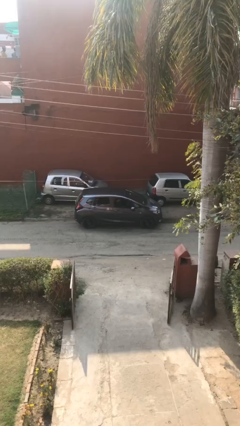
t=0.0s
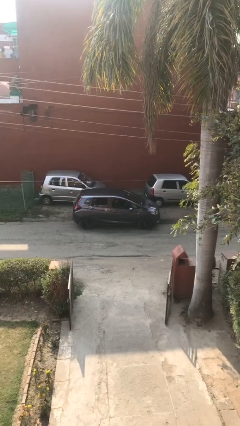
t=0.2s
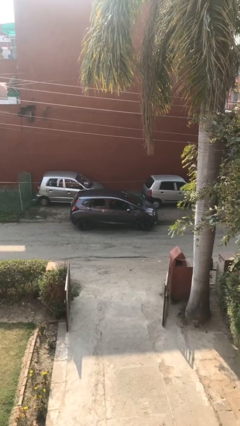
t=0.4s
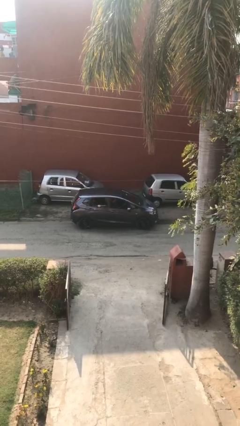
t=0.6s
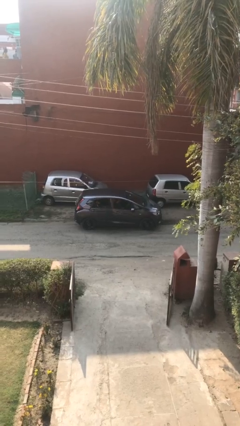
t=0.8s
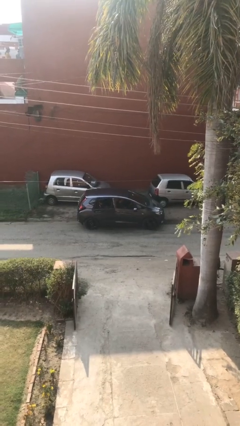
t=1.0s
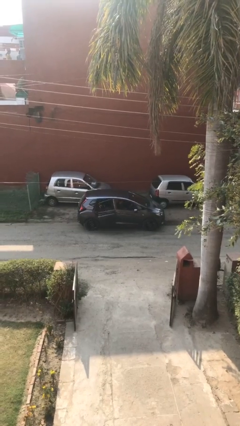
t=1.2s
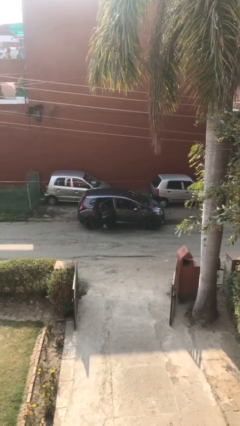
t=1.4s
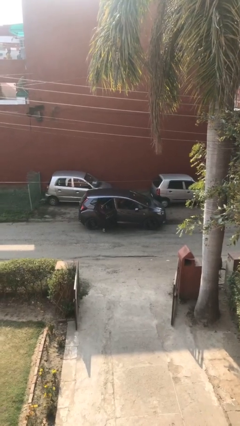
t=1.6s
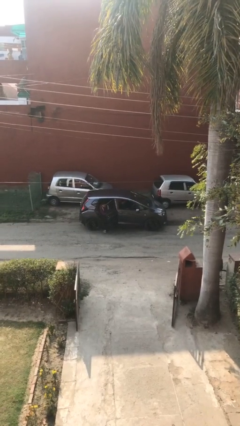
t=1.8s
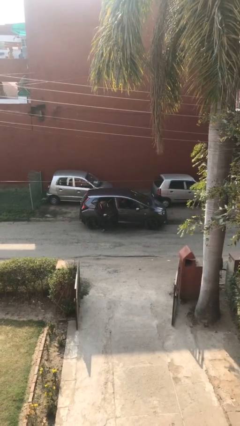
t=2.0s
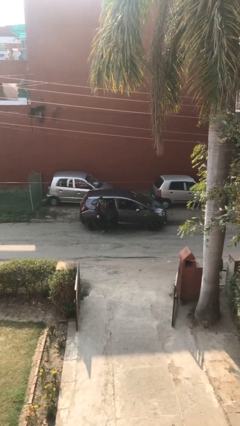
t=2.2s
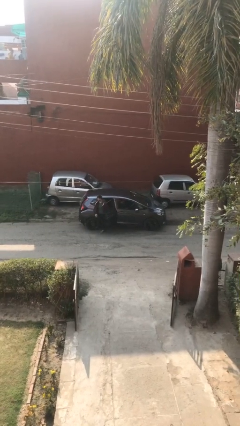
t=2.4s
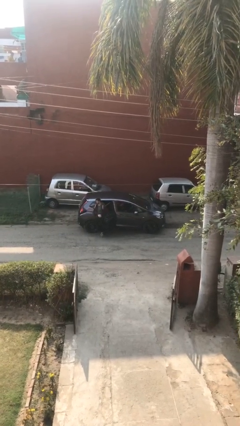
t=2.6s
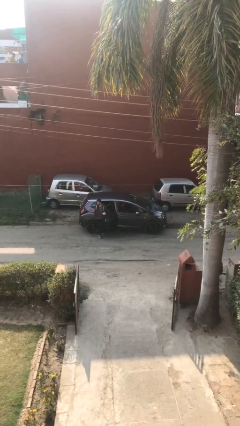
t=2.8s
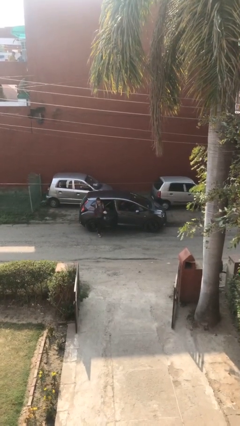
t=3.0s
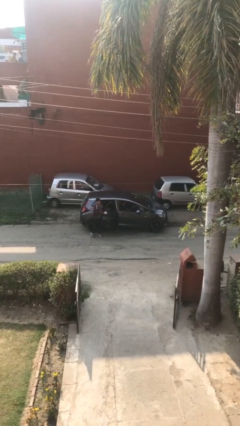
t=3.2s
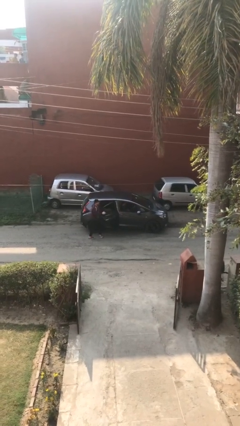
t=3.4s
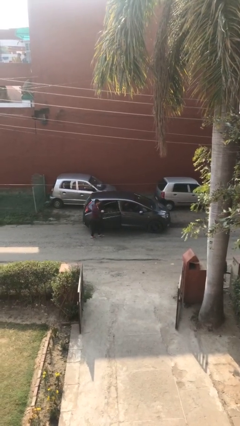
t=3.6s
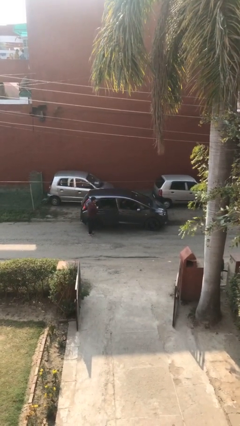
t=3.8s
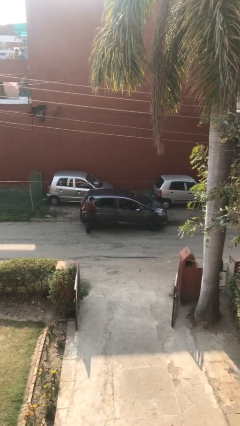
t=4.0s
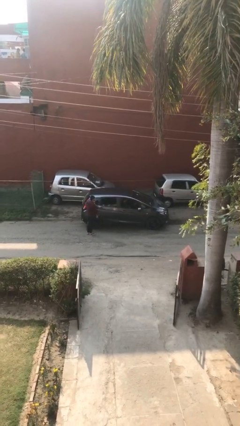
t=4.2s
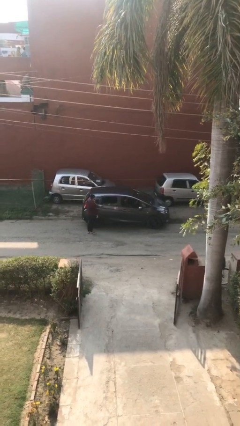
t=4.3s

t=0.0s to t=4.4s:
car drops off person

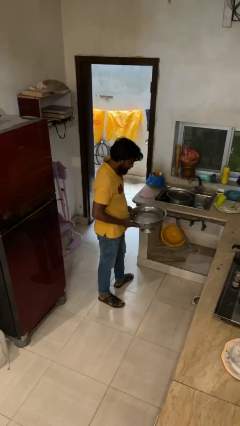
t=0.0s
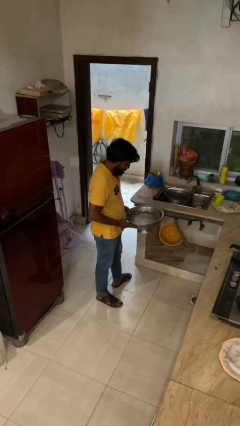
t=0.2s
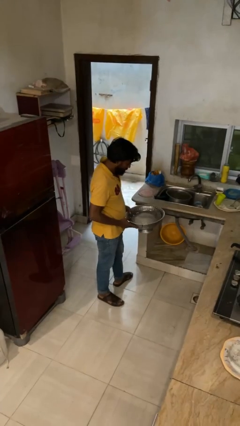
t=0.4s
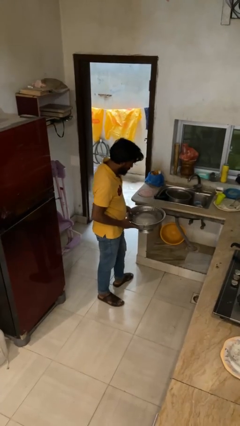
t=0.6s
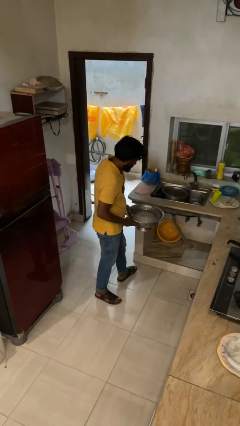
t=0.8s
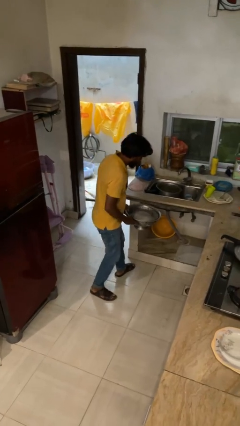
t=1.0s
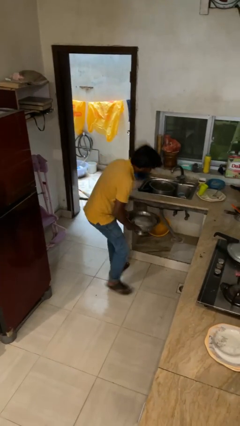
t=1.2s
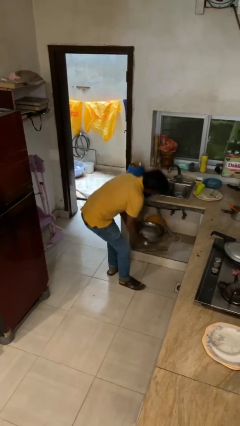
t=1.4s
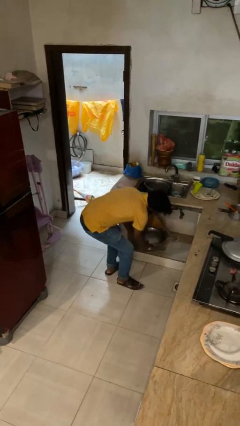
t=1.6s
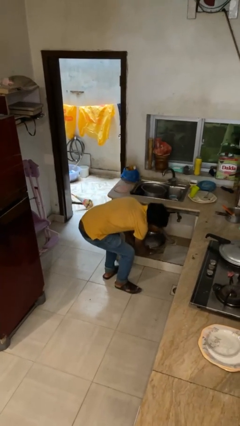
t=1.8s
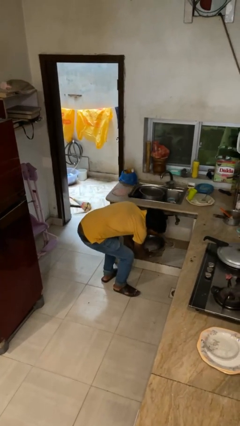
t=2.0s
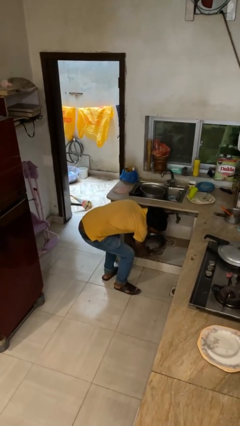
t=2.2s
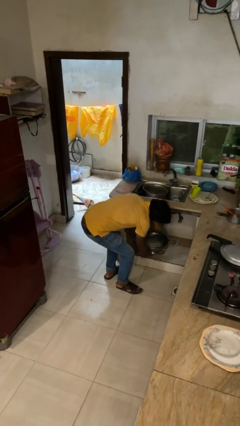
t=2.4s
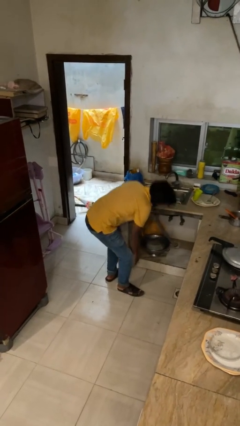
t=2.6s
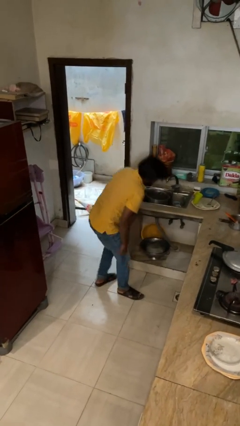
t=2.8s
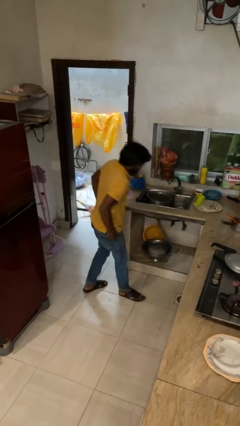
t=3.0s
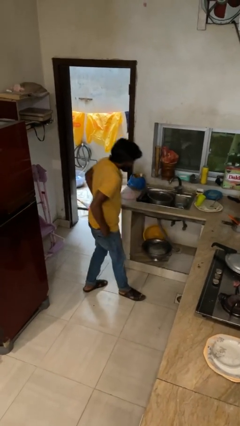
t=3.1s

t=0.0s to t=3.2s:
person puts down object into cabinet

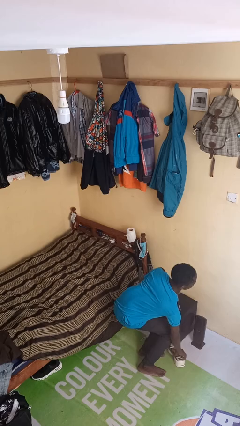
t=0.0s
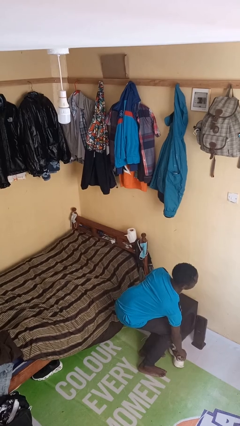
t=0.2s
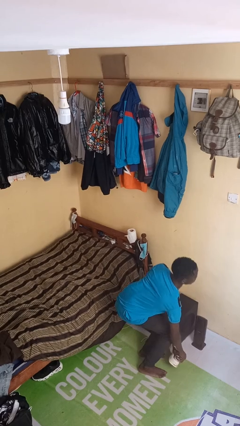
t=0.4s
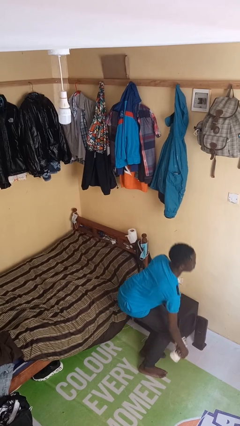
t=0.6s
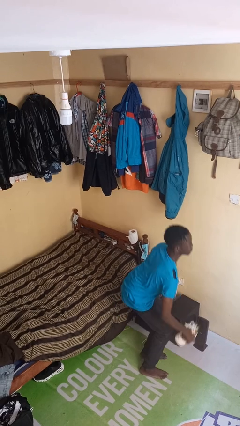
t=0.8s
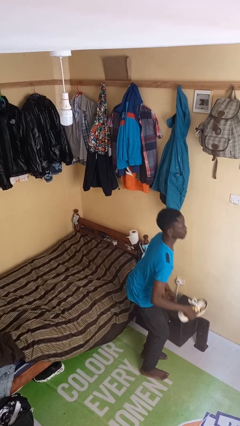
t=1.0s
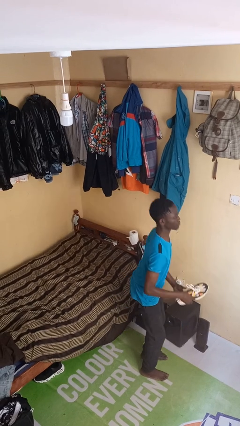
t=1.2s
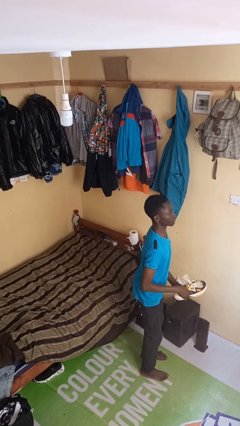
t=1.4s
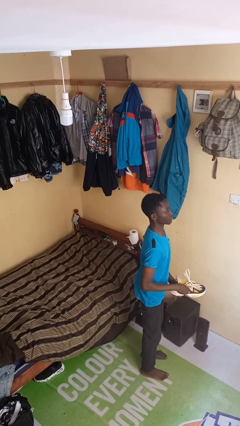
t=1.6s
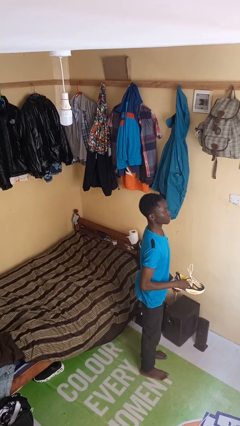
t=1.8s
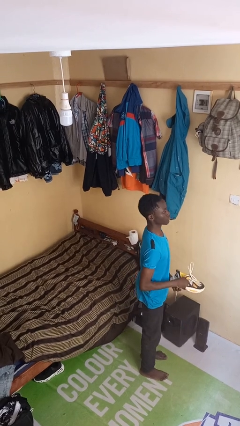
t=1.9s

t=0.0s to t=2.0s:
person picks up object from floor

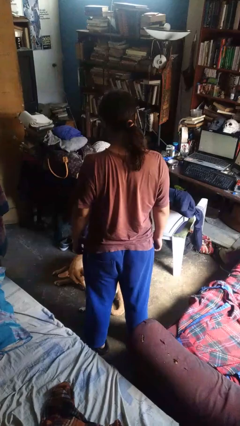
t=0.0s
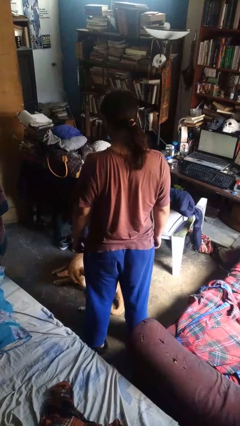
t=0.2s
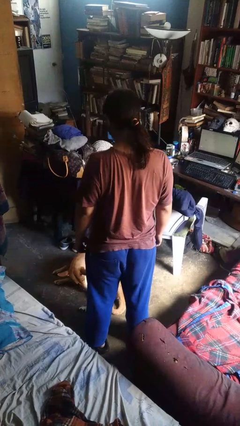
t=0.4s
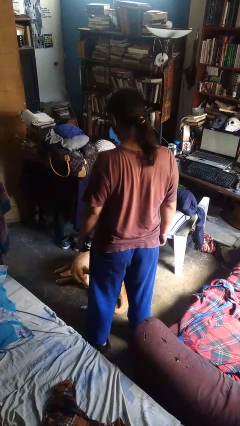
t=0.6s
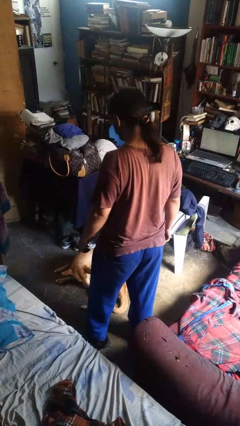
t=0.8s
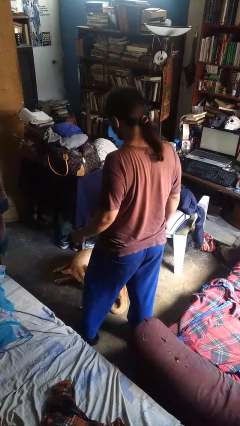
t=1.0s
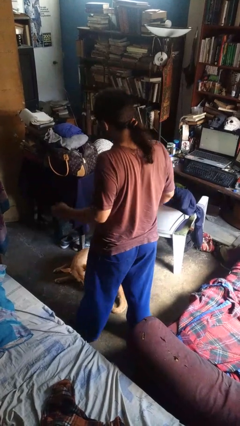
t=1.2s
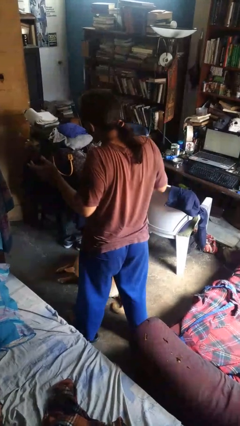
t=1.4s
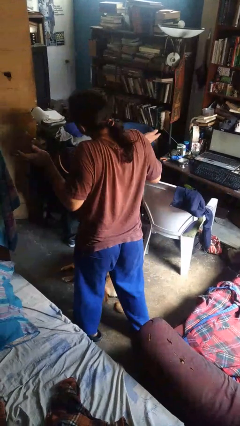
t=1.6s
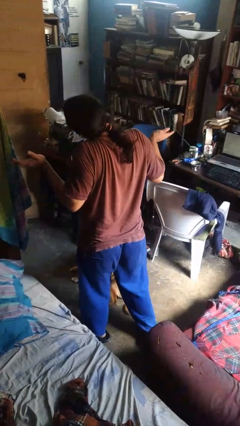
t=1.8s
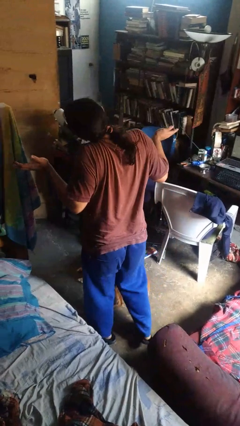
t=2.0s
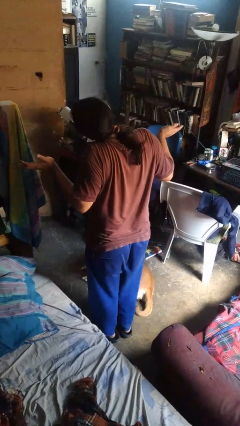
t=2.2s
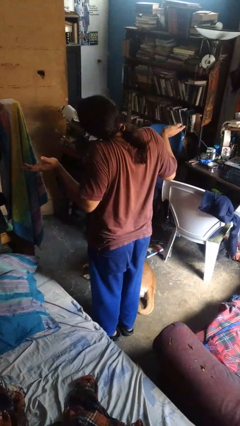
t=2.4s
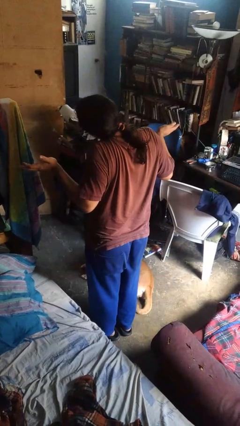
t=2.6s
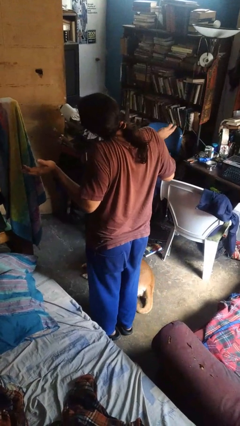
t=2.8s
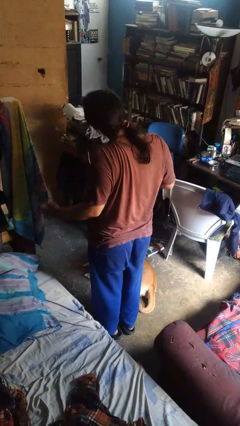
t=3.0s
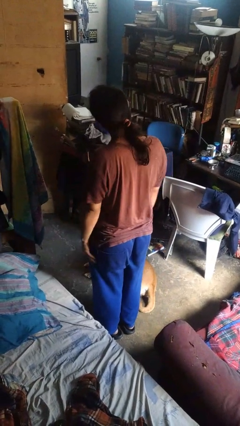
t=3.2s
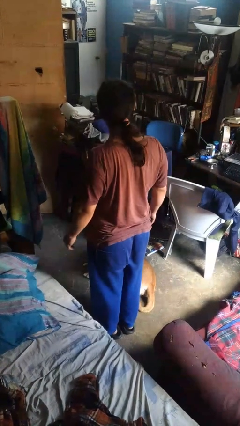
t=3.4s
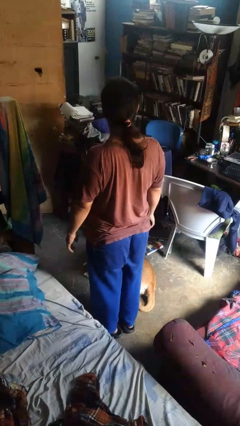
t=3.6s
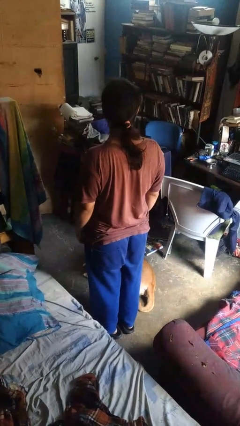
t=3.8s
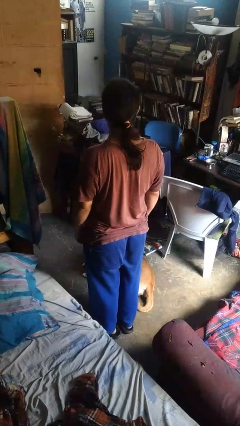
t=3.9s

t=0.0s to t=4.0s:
person shrugs

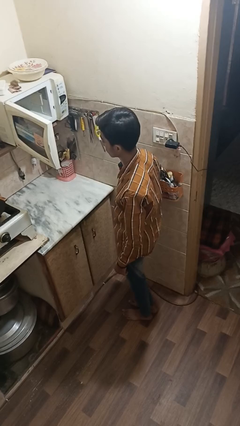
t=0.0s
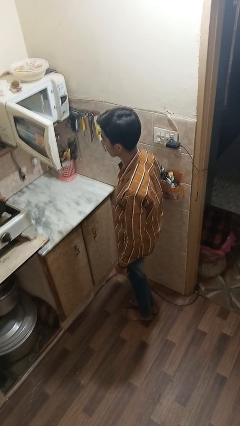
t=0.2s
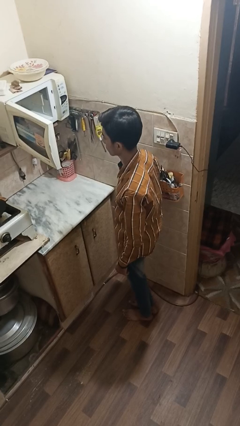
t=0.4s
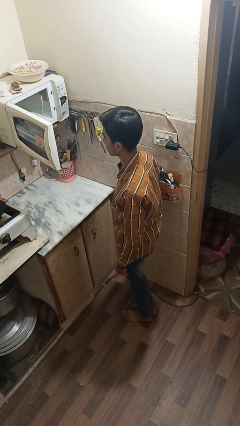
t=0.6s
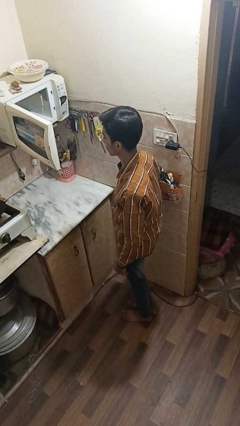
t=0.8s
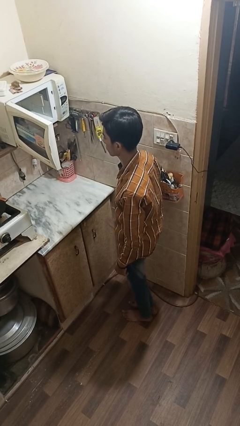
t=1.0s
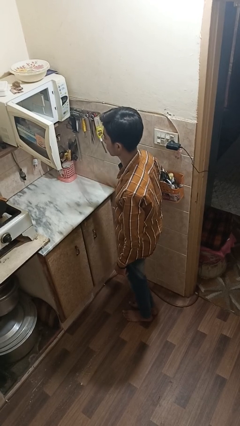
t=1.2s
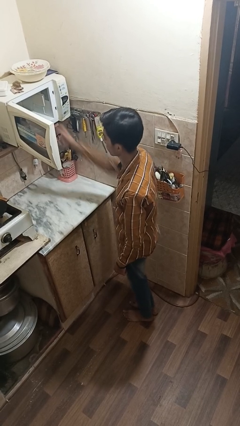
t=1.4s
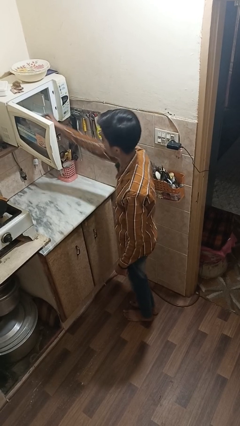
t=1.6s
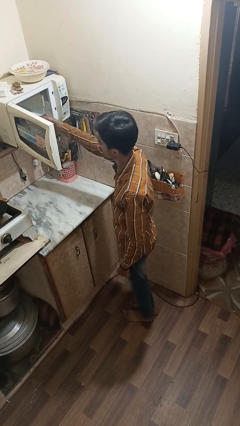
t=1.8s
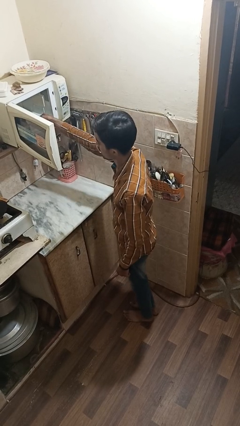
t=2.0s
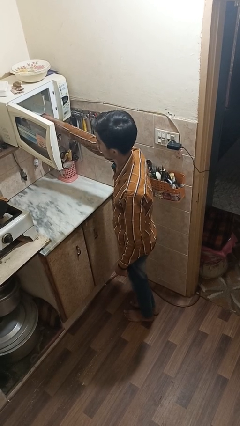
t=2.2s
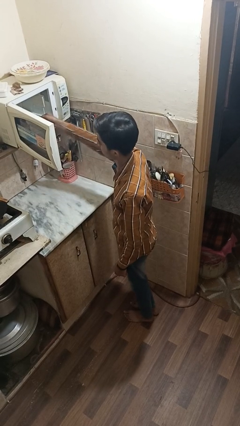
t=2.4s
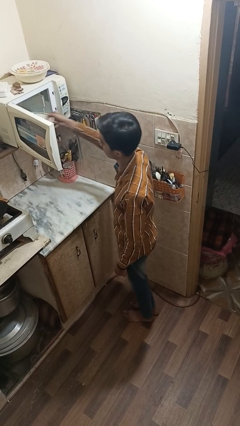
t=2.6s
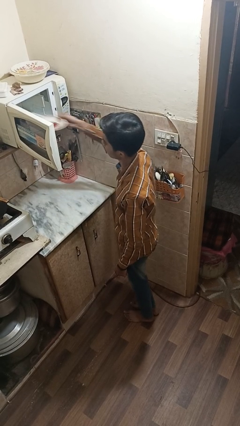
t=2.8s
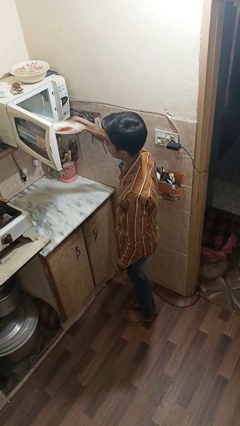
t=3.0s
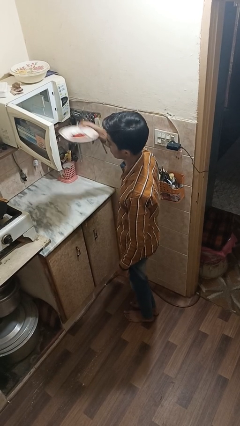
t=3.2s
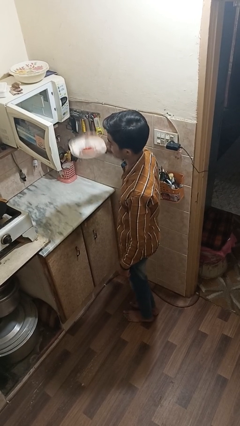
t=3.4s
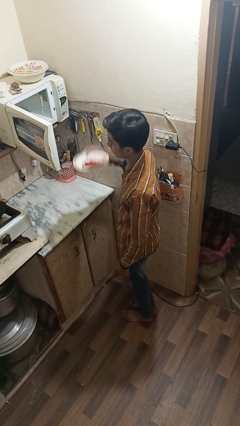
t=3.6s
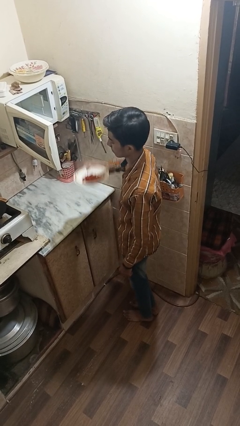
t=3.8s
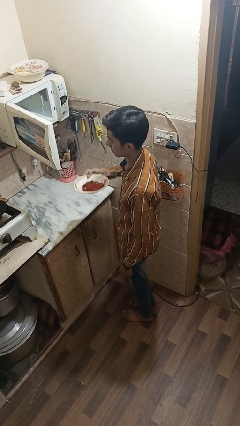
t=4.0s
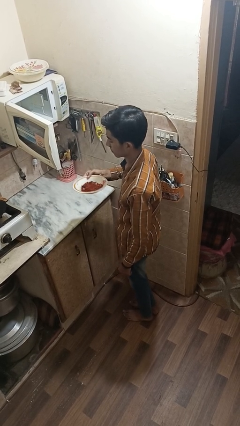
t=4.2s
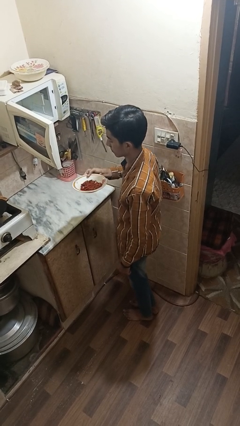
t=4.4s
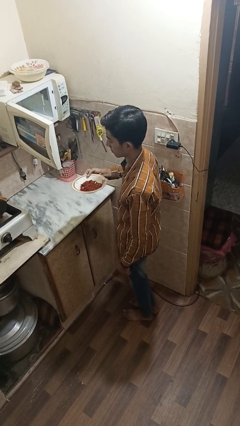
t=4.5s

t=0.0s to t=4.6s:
person takes object from microwave
